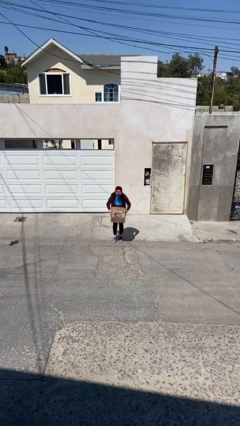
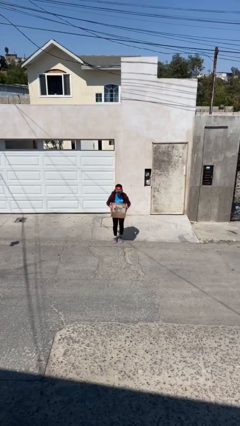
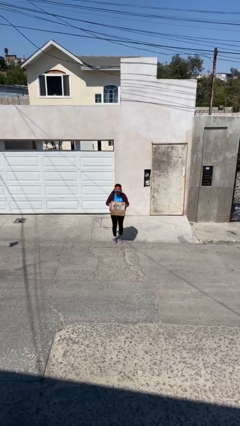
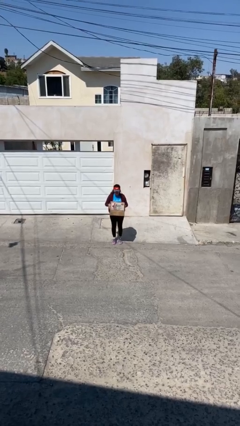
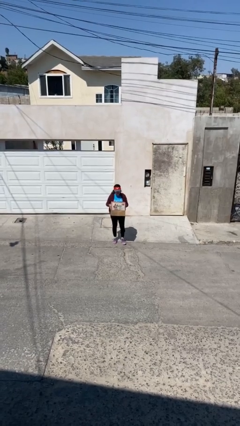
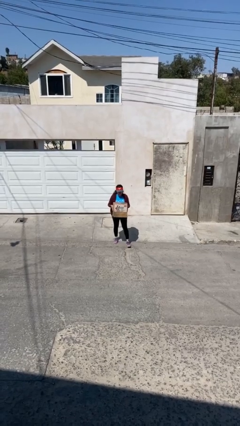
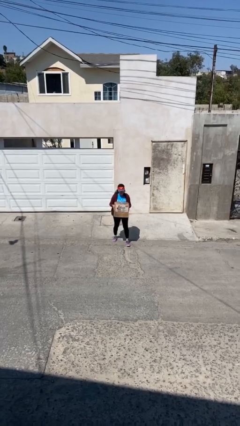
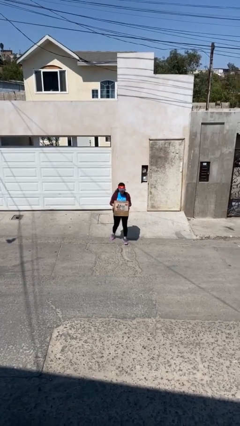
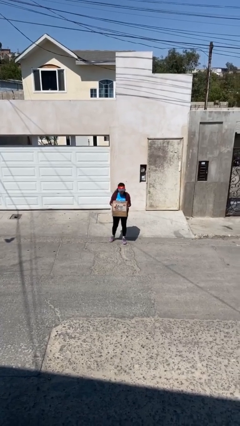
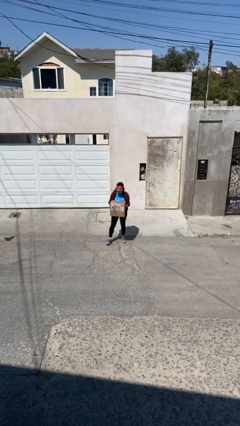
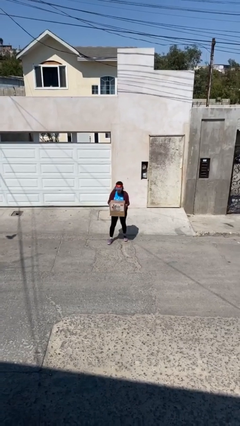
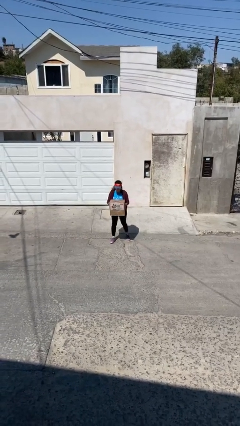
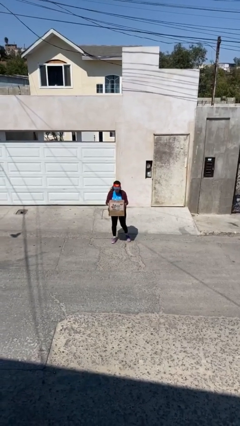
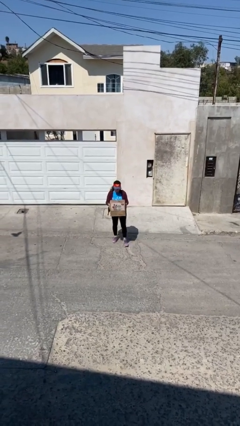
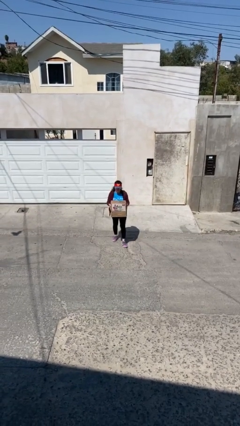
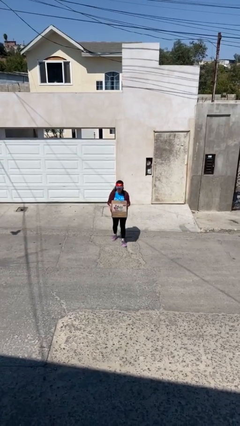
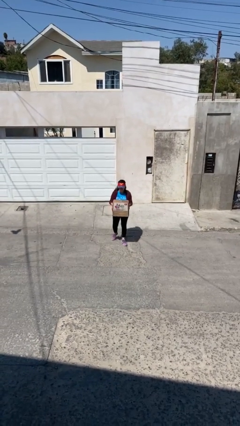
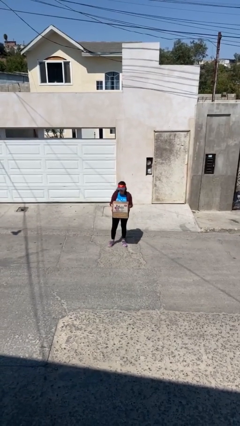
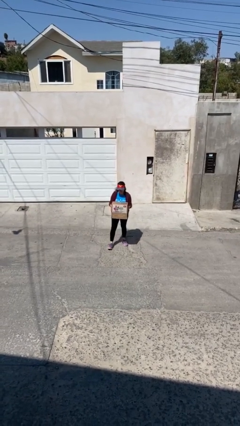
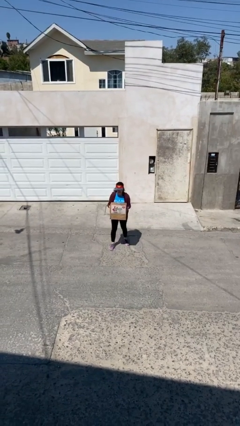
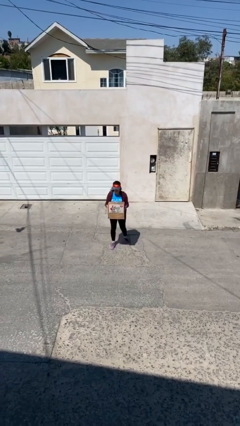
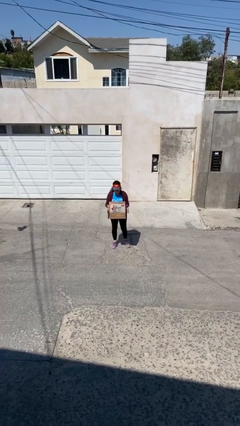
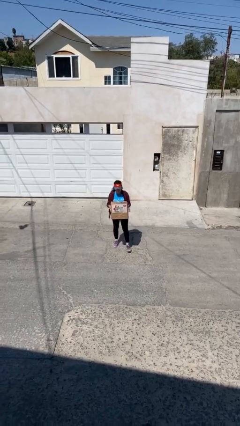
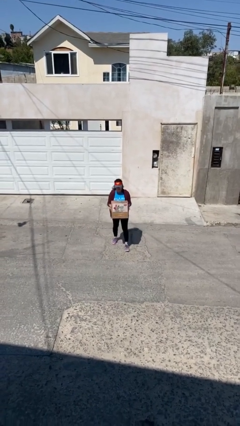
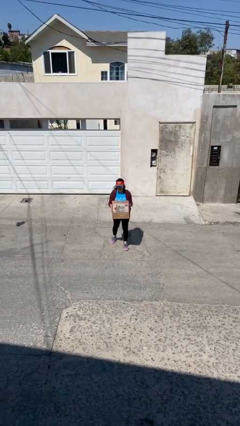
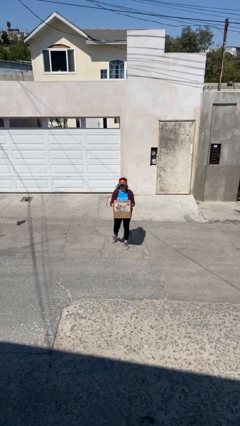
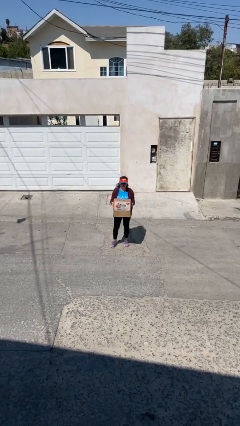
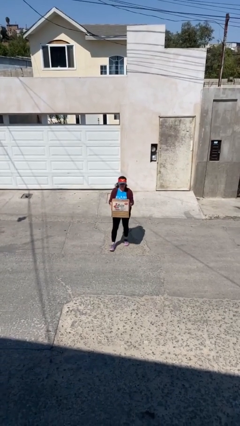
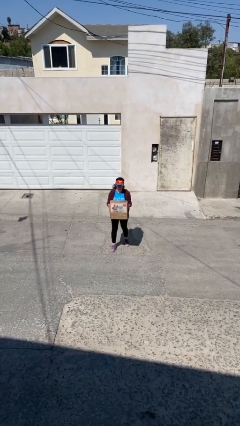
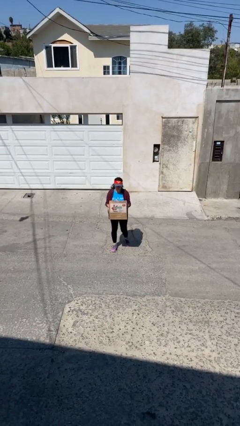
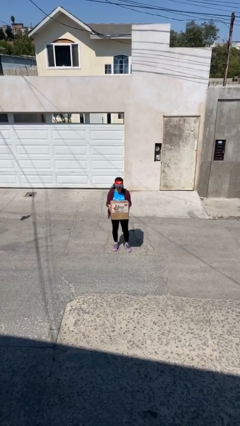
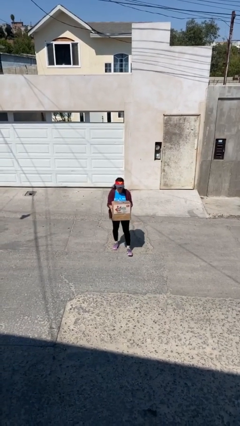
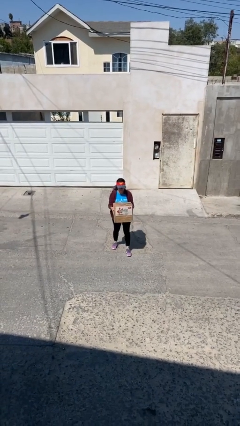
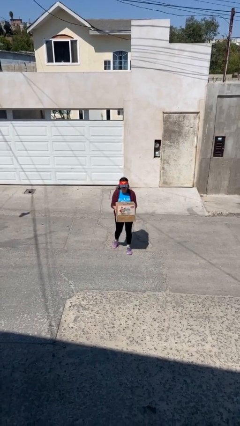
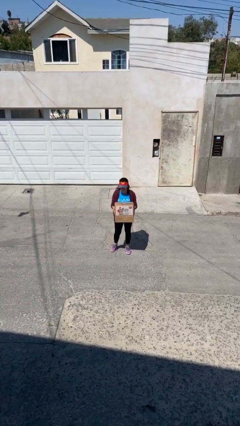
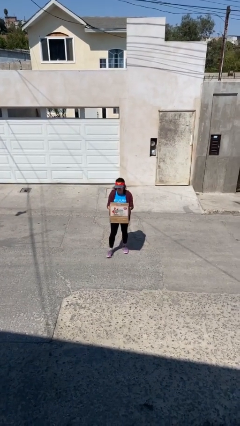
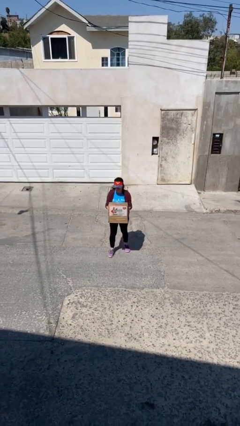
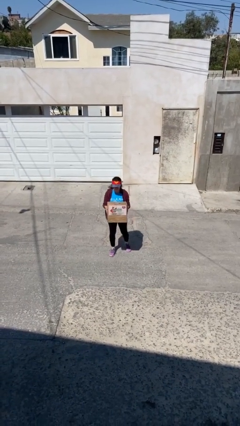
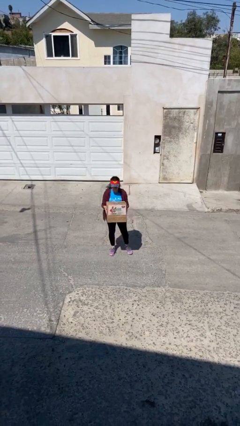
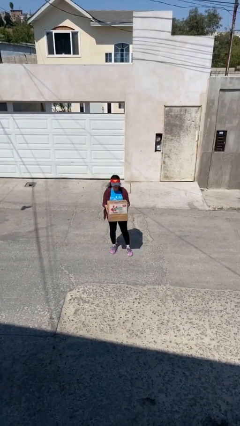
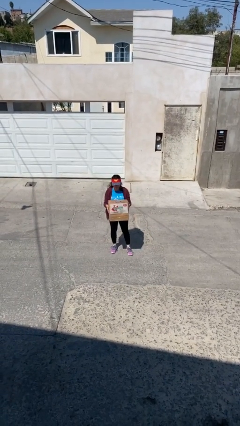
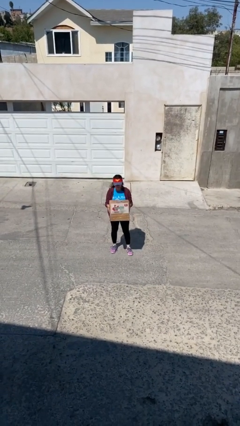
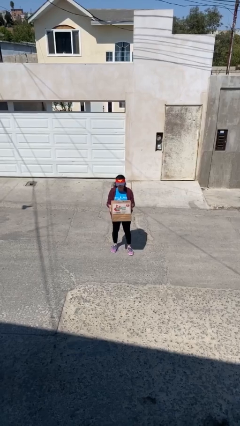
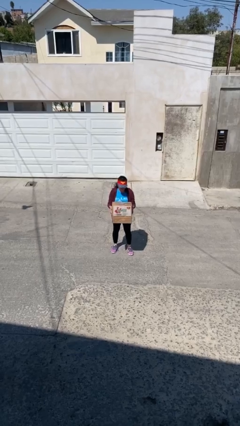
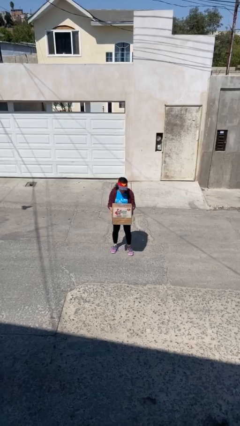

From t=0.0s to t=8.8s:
person carries heavy object

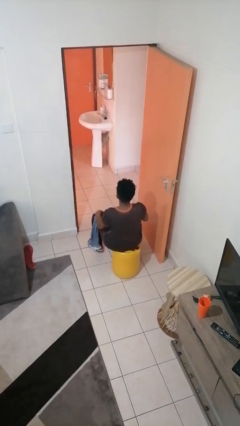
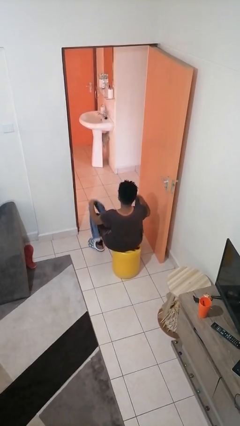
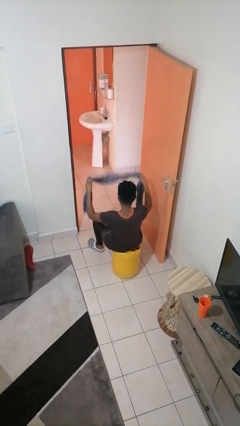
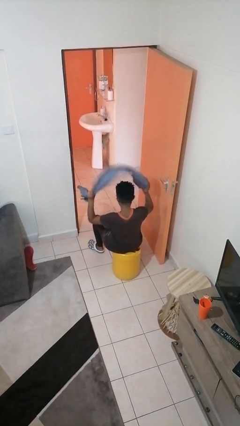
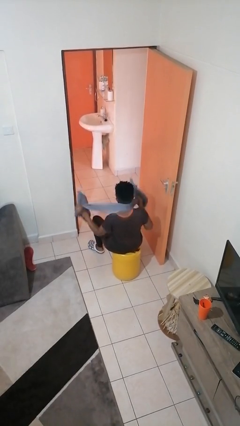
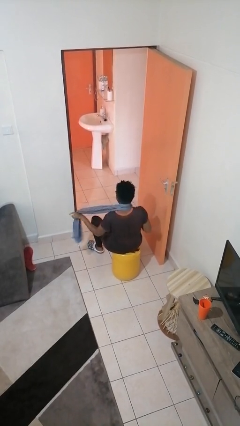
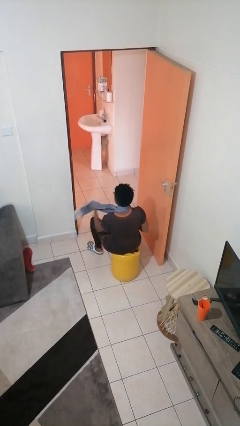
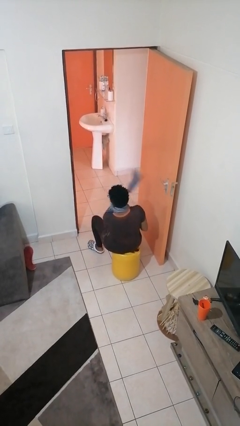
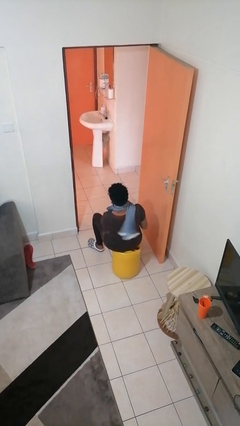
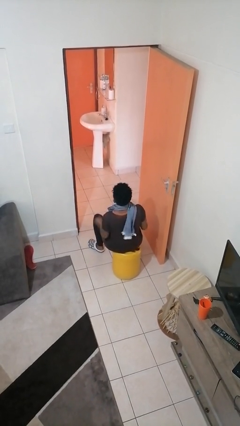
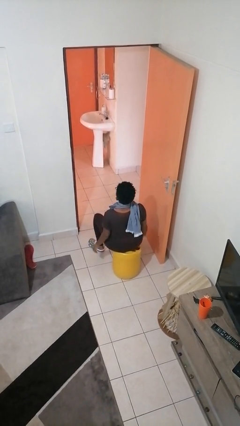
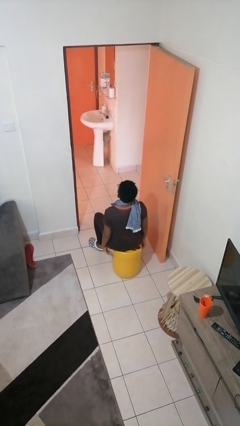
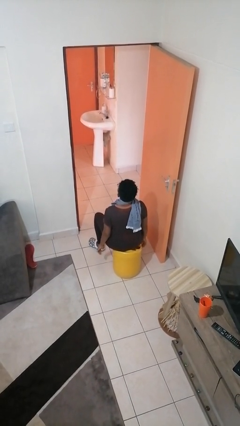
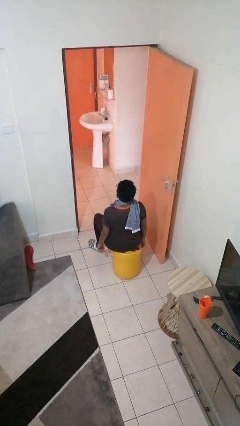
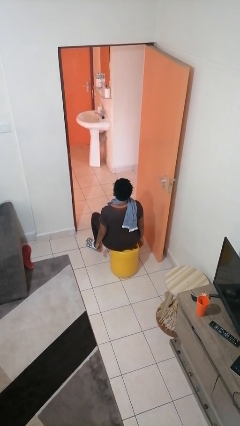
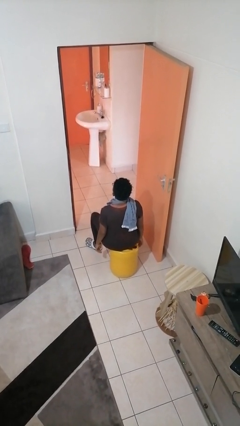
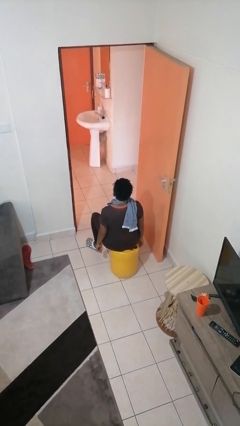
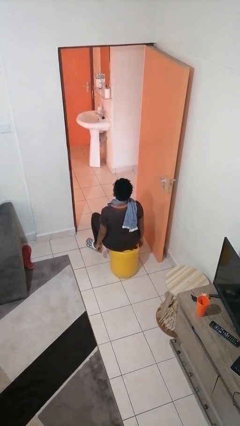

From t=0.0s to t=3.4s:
person puts on scarf

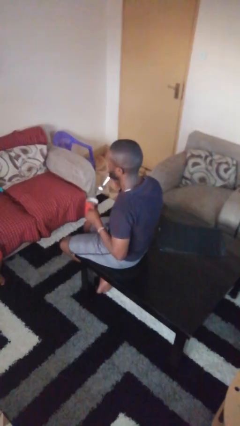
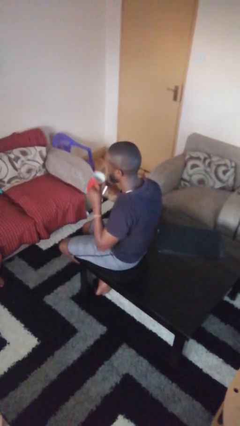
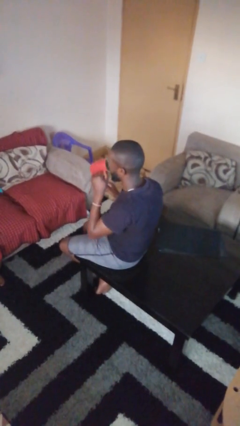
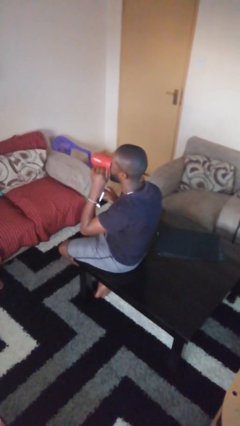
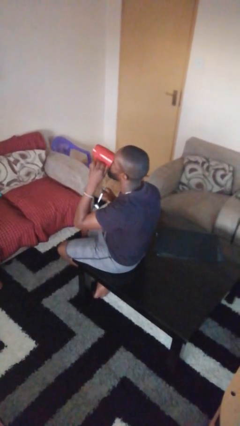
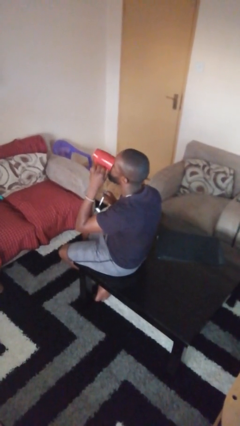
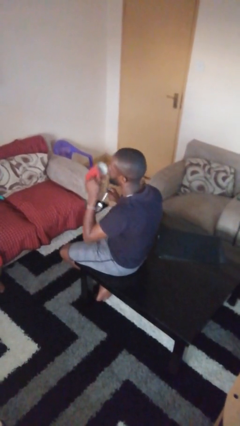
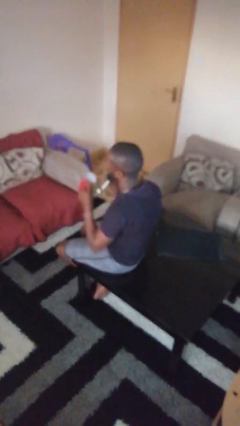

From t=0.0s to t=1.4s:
person drinks from mug

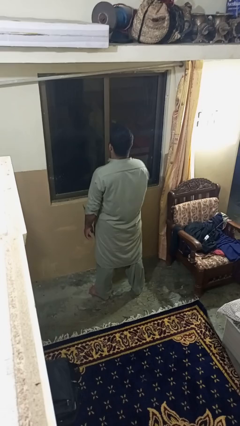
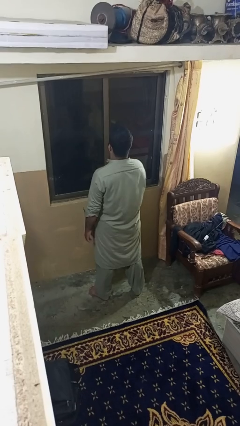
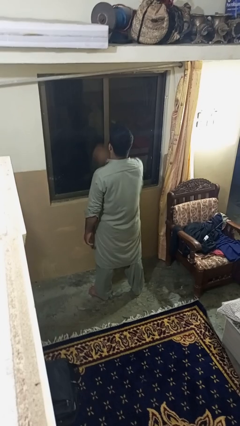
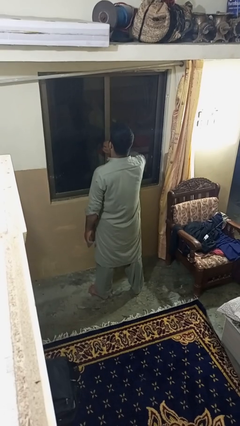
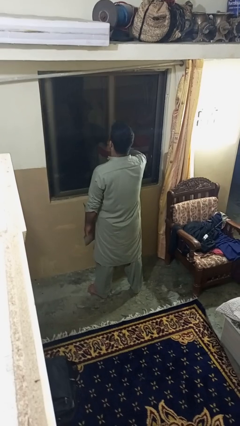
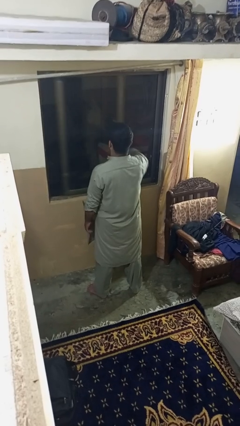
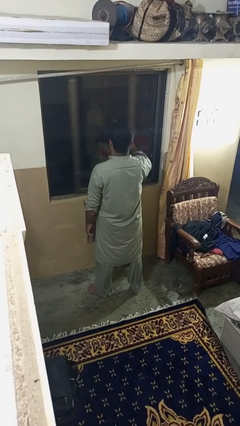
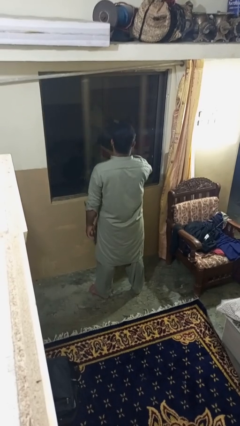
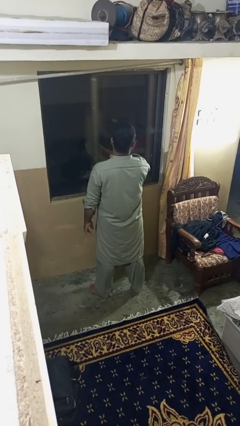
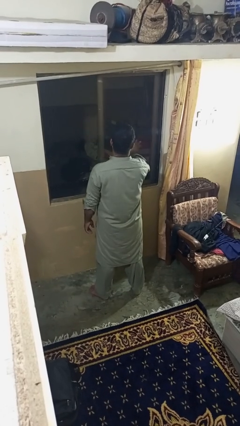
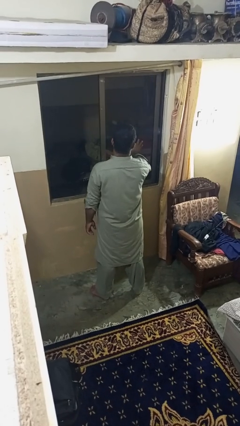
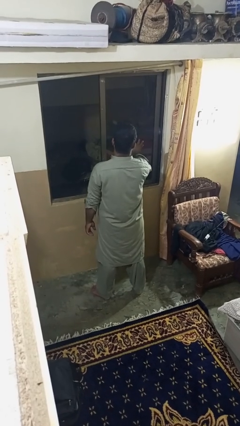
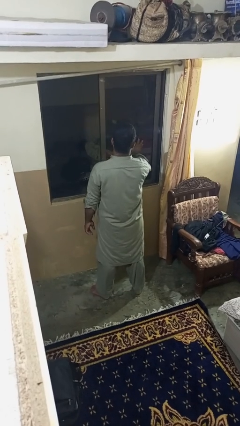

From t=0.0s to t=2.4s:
person opens home window

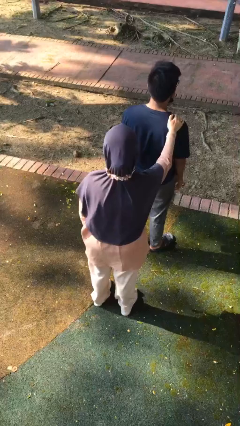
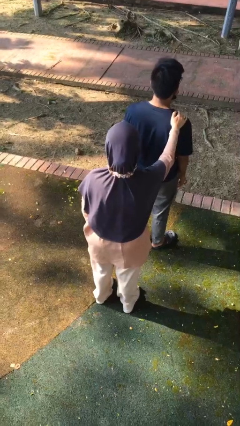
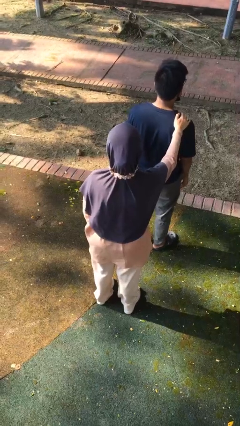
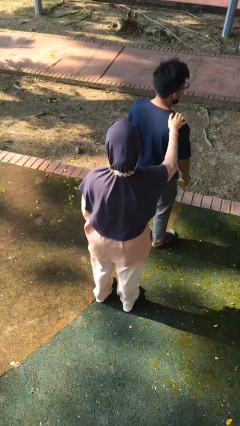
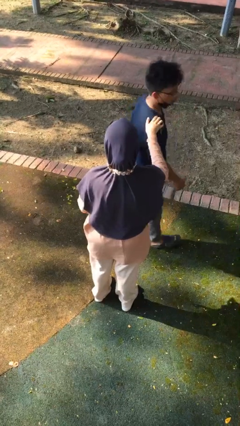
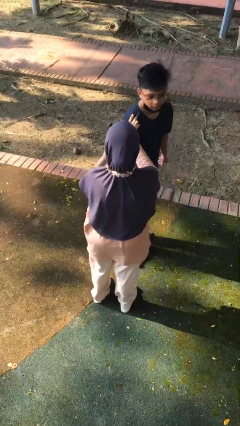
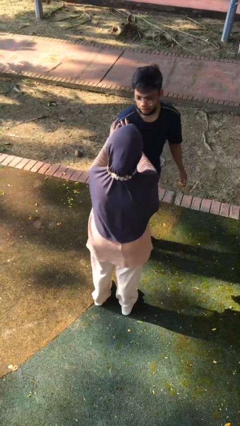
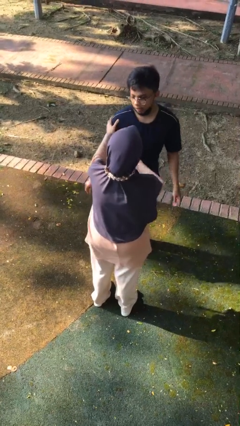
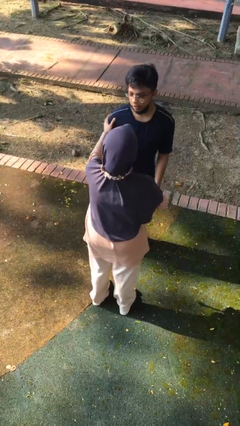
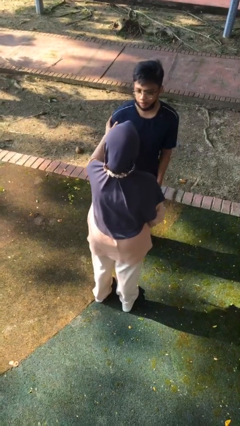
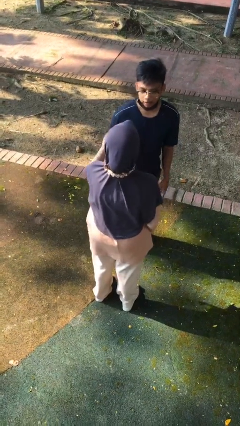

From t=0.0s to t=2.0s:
person spins person around
